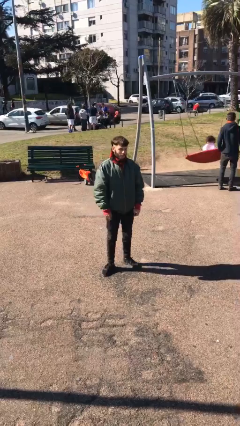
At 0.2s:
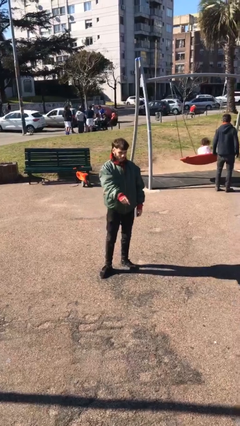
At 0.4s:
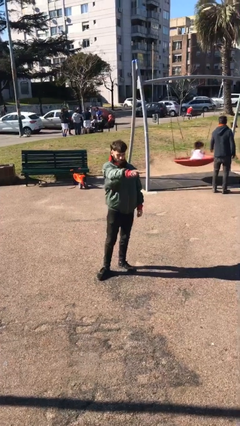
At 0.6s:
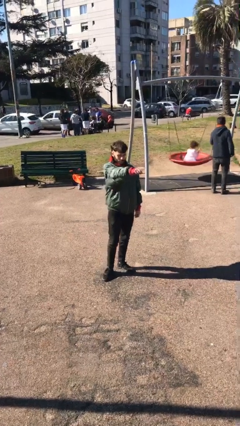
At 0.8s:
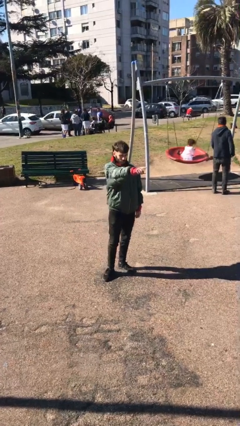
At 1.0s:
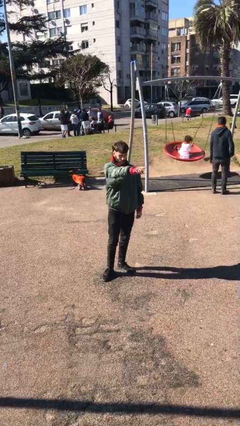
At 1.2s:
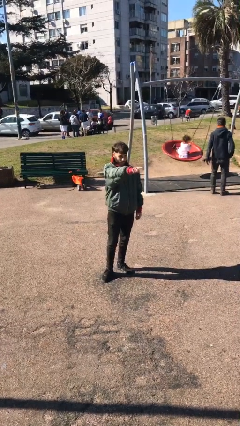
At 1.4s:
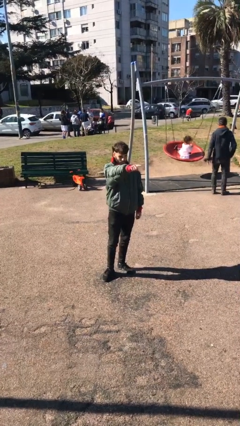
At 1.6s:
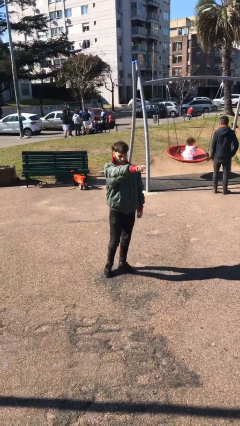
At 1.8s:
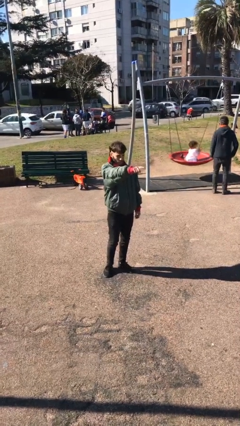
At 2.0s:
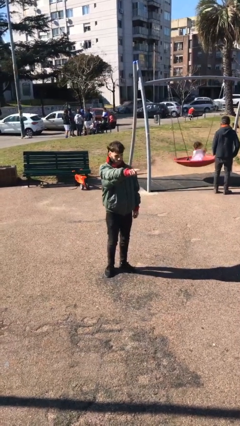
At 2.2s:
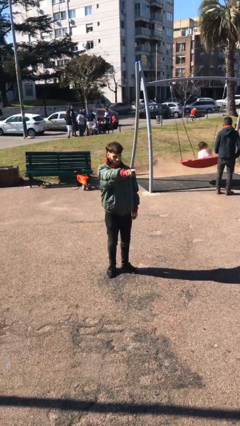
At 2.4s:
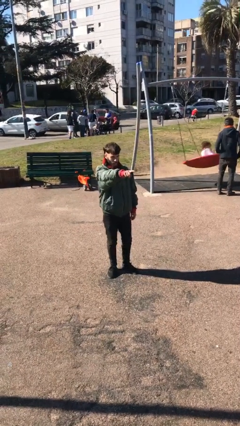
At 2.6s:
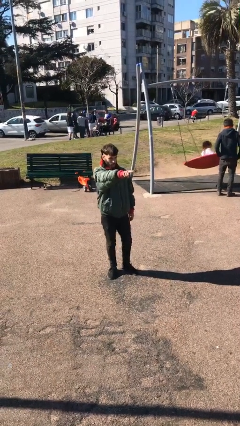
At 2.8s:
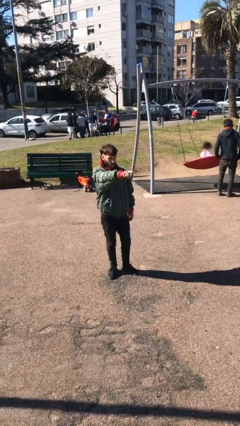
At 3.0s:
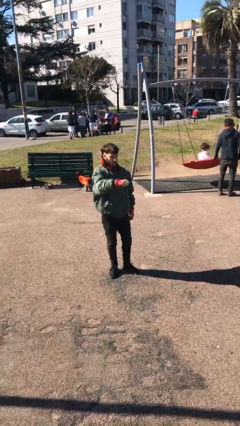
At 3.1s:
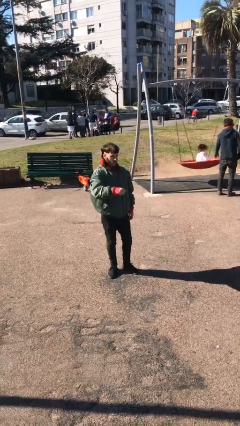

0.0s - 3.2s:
person points at person

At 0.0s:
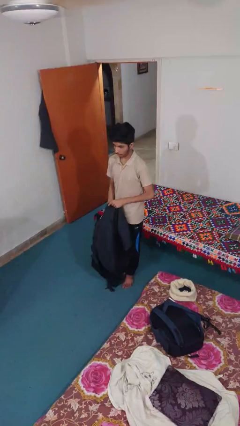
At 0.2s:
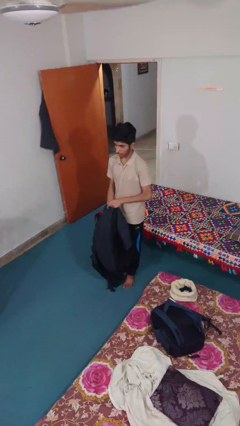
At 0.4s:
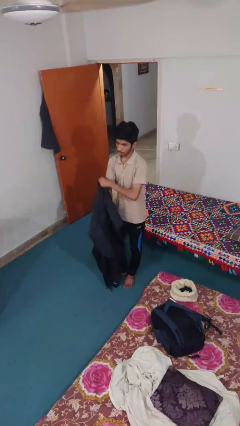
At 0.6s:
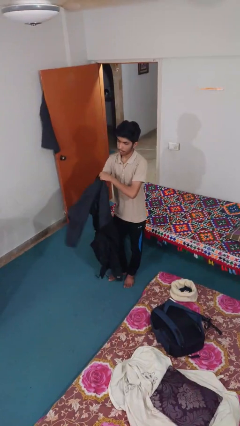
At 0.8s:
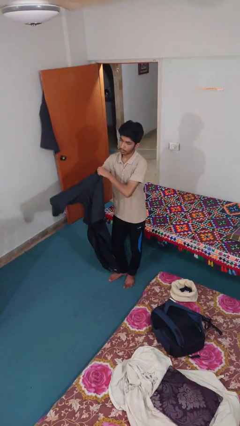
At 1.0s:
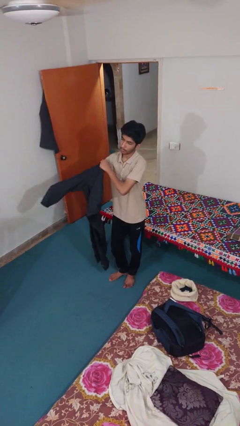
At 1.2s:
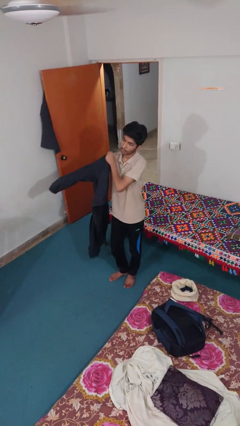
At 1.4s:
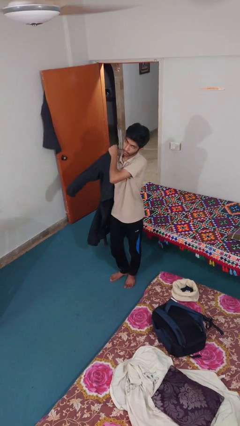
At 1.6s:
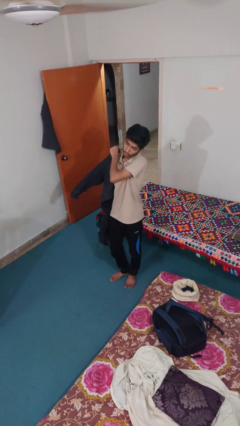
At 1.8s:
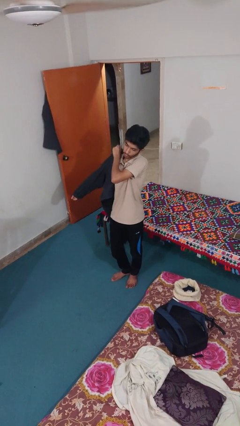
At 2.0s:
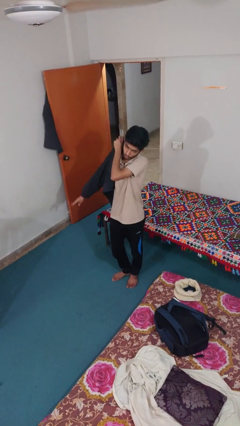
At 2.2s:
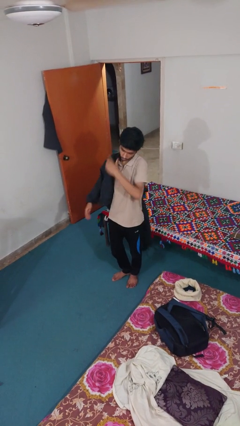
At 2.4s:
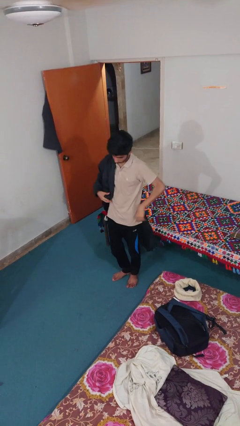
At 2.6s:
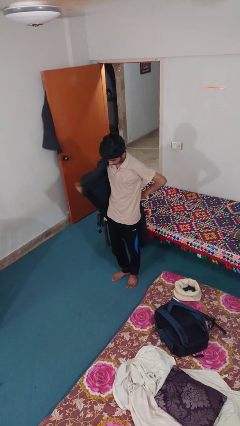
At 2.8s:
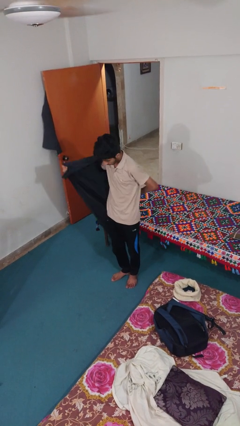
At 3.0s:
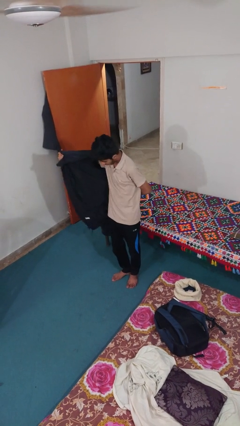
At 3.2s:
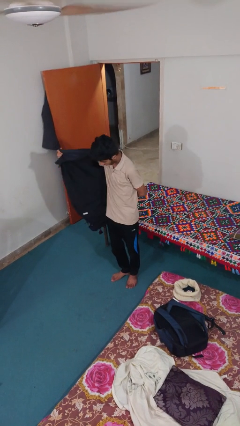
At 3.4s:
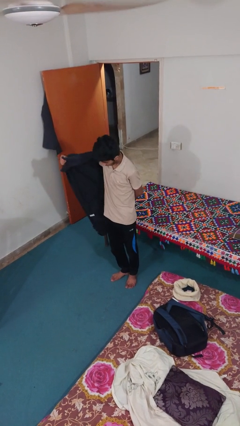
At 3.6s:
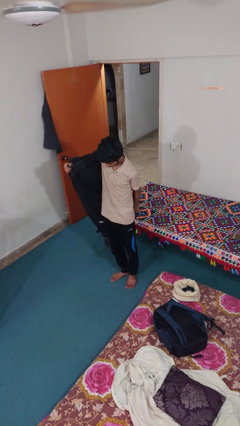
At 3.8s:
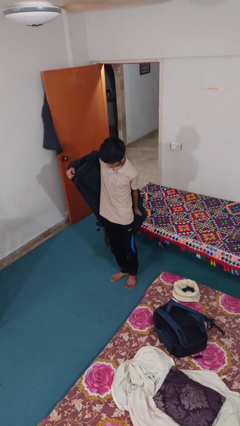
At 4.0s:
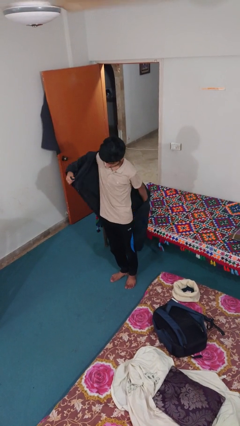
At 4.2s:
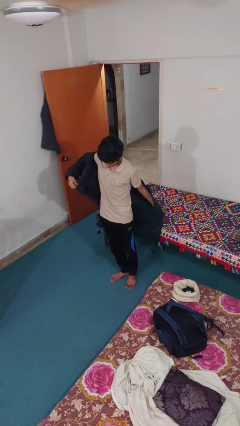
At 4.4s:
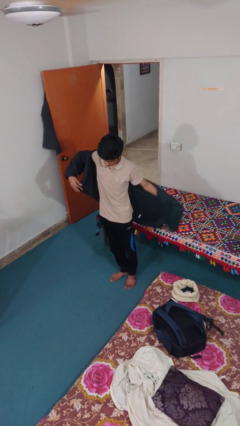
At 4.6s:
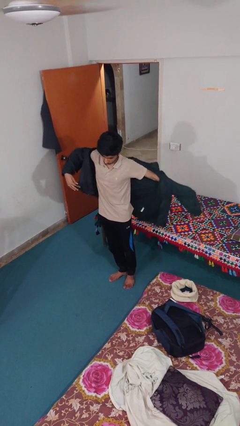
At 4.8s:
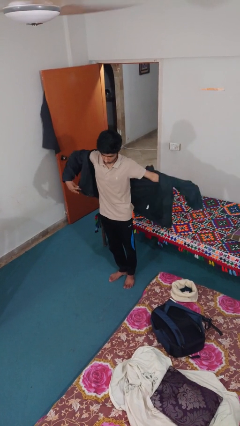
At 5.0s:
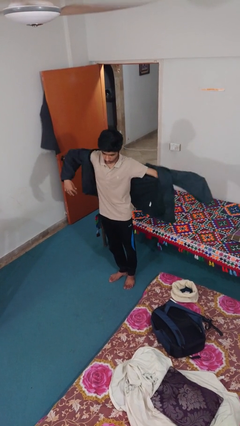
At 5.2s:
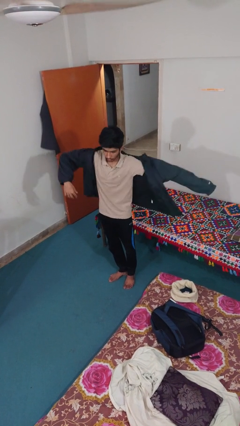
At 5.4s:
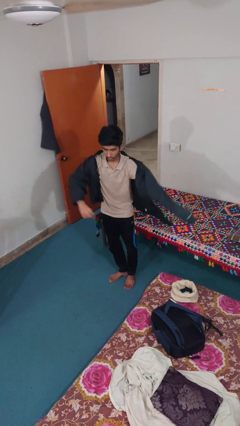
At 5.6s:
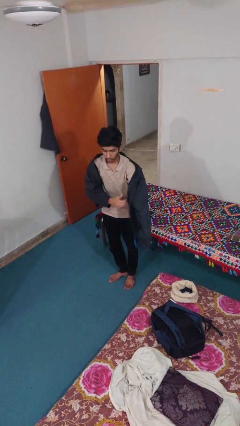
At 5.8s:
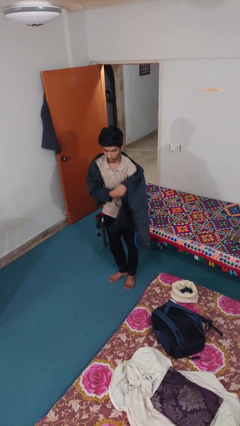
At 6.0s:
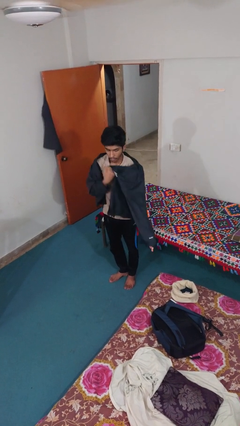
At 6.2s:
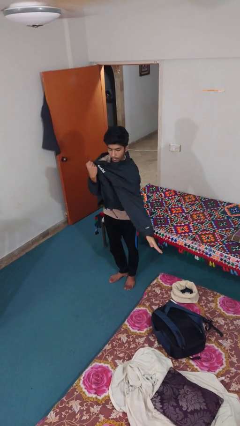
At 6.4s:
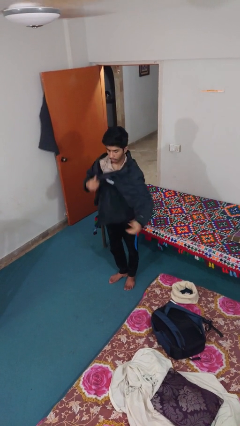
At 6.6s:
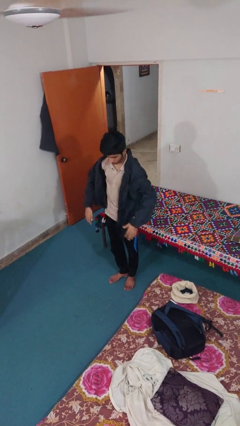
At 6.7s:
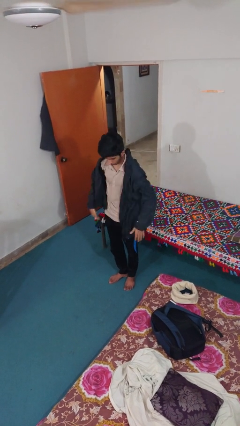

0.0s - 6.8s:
person puts on jacket

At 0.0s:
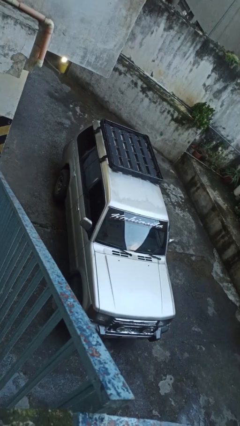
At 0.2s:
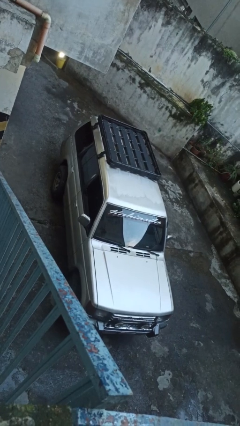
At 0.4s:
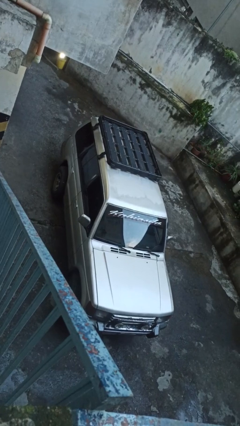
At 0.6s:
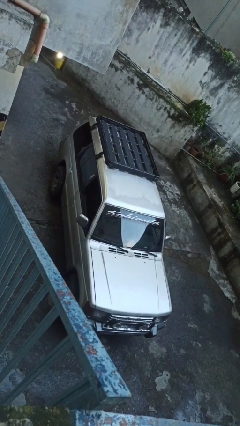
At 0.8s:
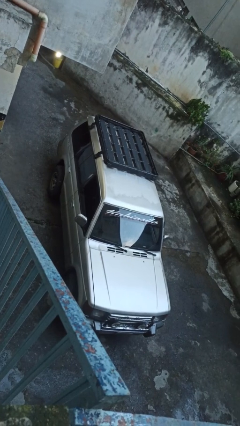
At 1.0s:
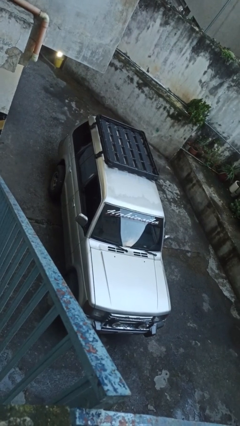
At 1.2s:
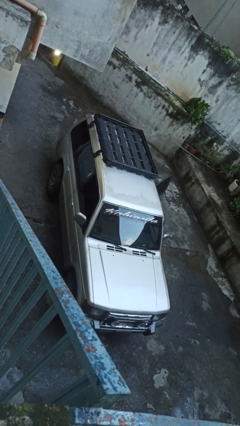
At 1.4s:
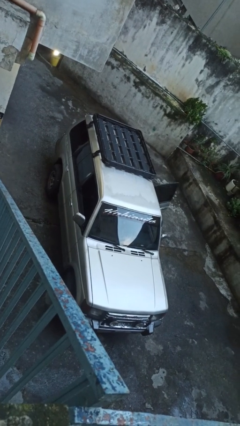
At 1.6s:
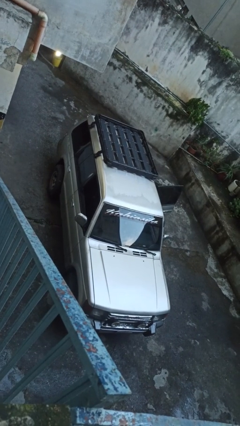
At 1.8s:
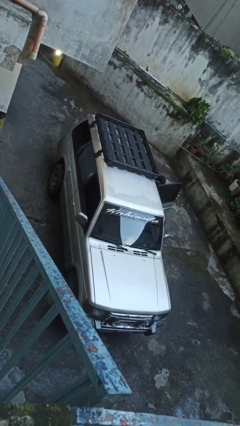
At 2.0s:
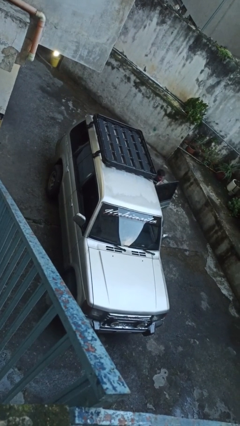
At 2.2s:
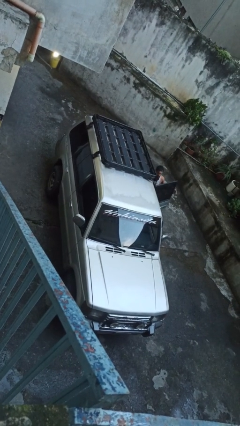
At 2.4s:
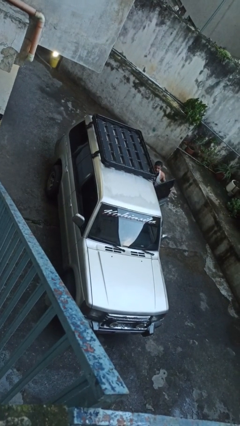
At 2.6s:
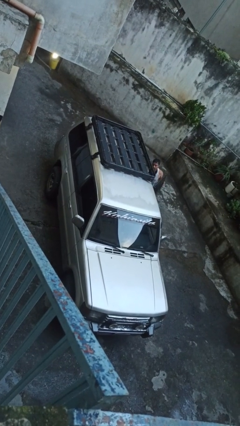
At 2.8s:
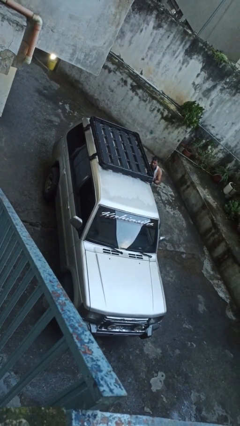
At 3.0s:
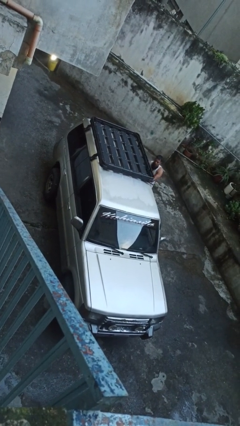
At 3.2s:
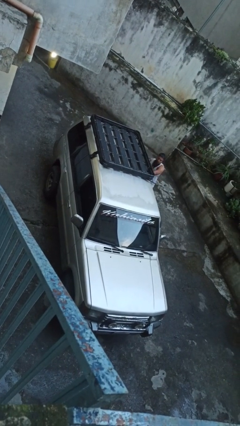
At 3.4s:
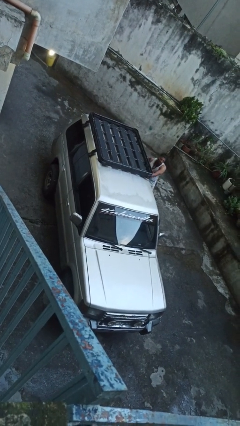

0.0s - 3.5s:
car drops off person

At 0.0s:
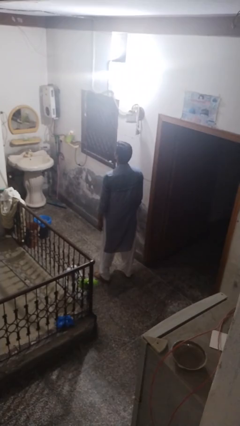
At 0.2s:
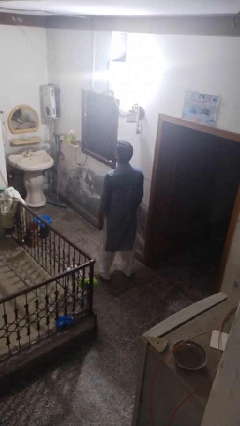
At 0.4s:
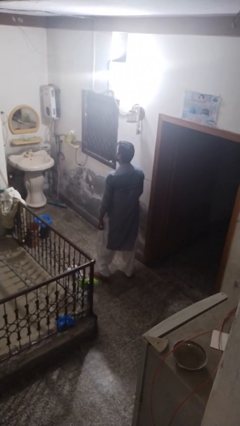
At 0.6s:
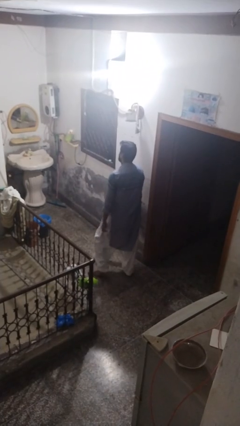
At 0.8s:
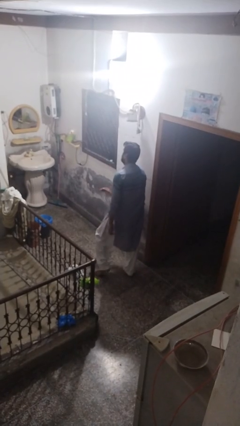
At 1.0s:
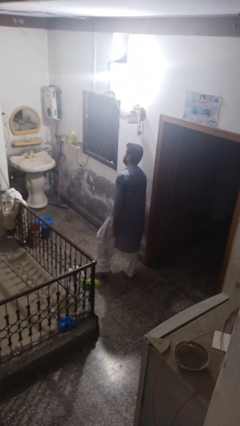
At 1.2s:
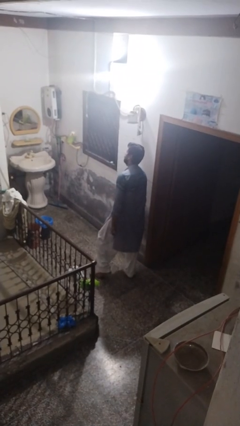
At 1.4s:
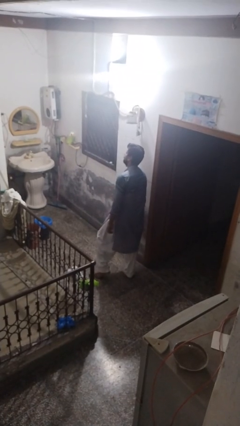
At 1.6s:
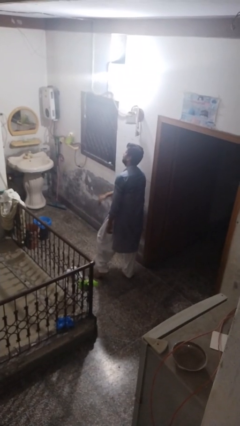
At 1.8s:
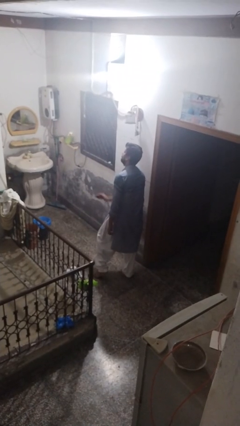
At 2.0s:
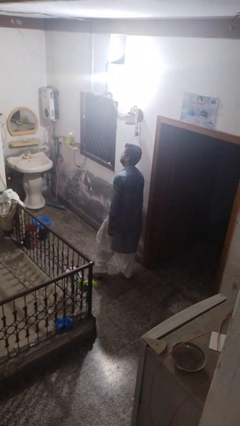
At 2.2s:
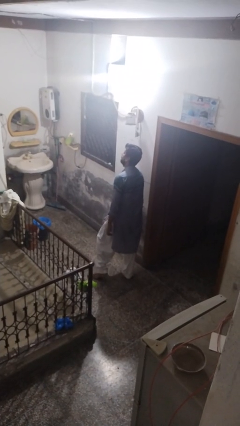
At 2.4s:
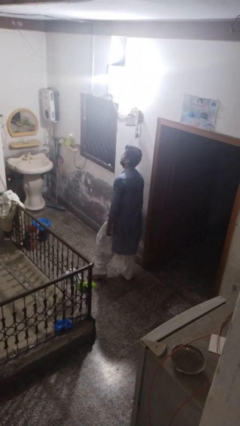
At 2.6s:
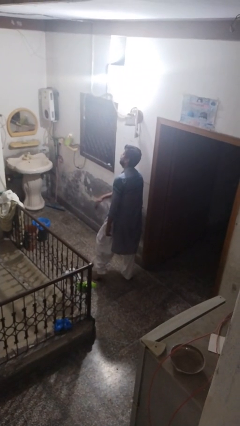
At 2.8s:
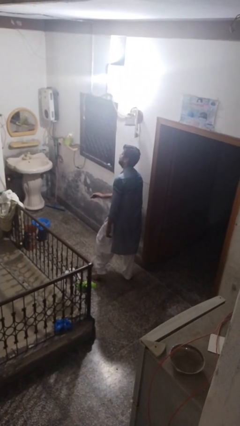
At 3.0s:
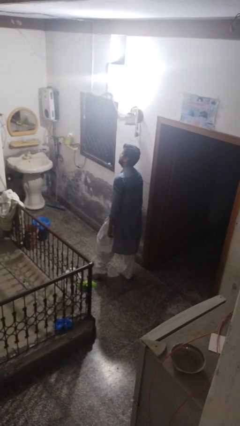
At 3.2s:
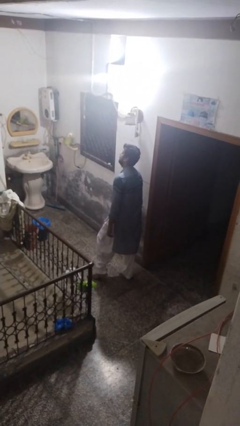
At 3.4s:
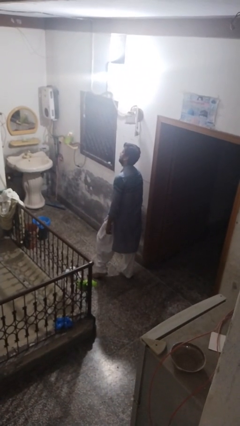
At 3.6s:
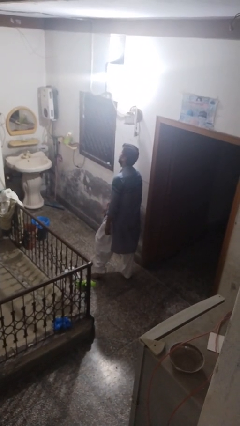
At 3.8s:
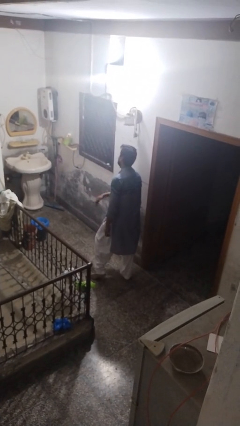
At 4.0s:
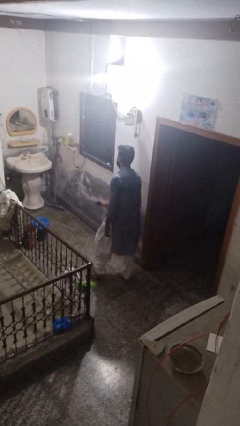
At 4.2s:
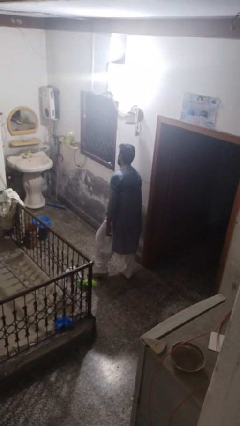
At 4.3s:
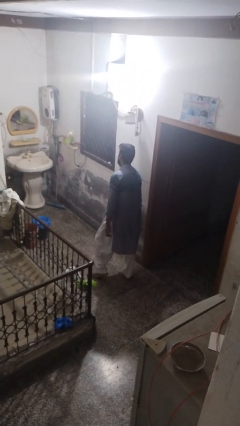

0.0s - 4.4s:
person slaps hands on thighs
